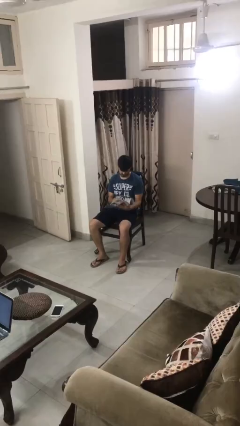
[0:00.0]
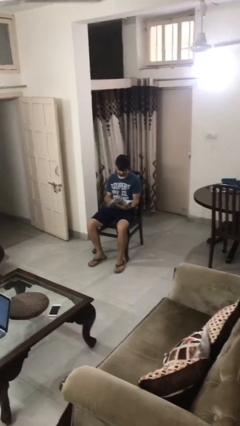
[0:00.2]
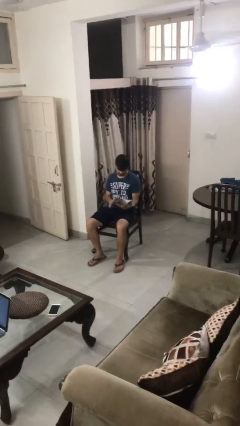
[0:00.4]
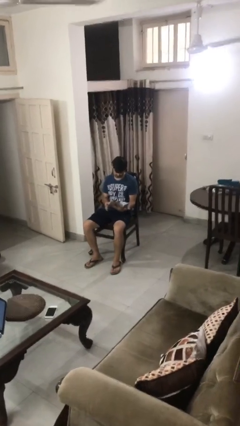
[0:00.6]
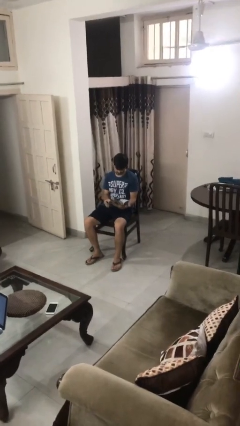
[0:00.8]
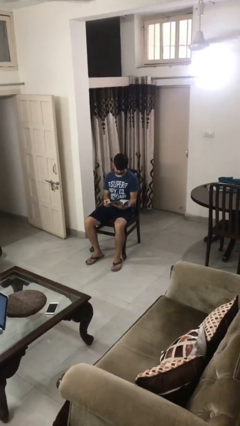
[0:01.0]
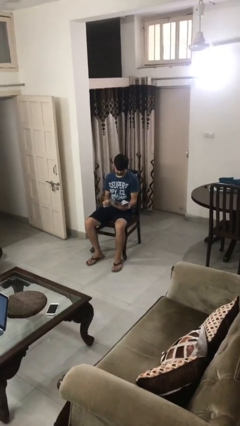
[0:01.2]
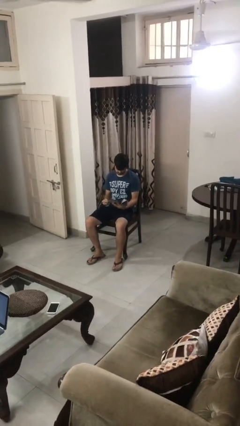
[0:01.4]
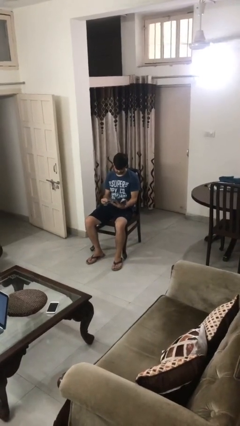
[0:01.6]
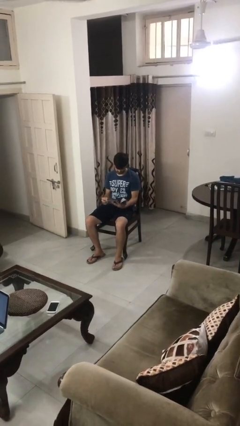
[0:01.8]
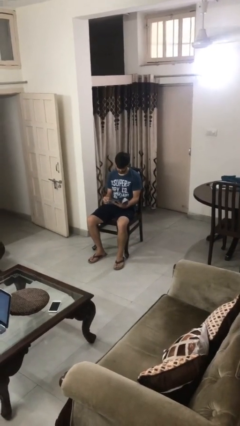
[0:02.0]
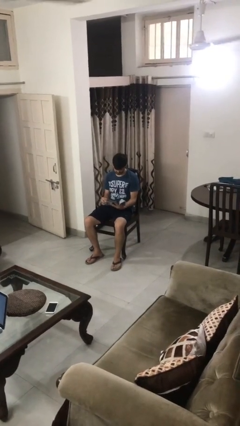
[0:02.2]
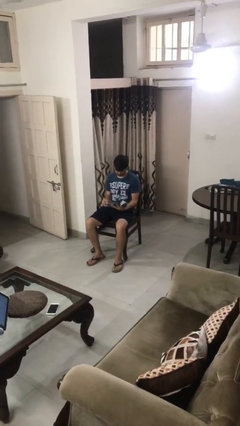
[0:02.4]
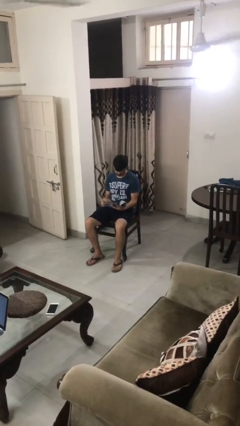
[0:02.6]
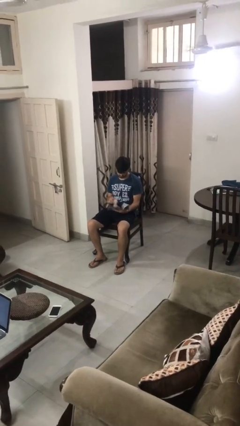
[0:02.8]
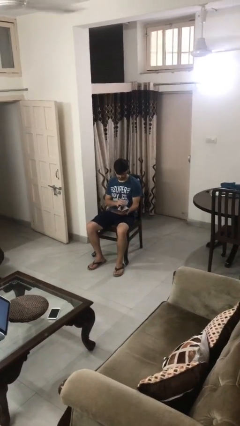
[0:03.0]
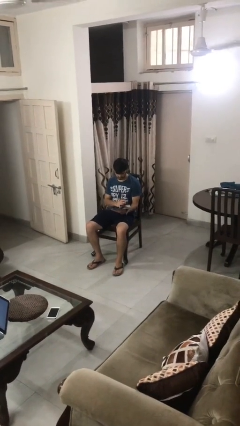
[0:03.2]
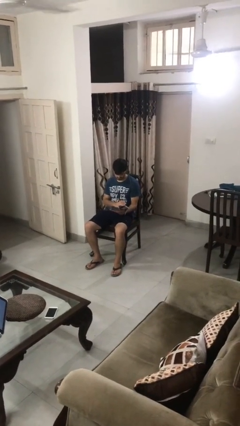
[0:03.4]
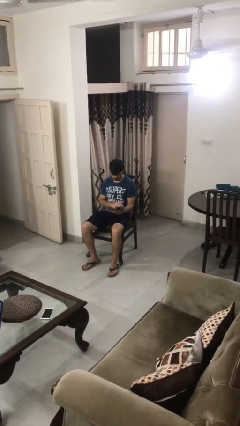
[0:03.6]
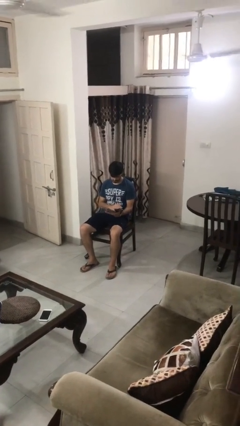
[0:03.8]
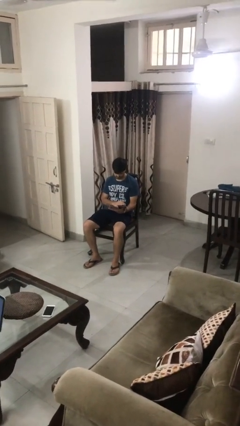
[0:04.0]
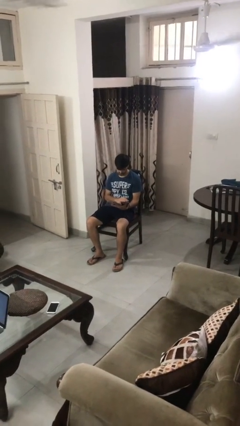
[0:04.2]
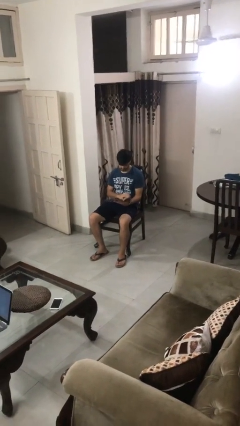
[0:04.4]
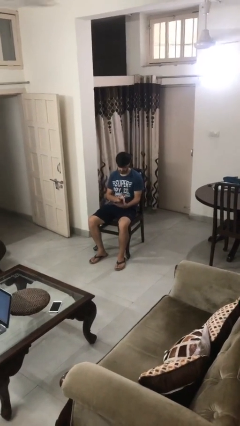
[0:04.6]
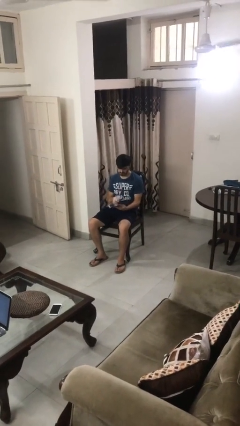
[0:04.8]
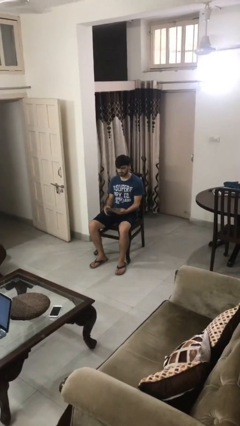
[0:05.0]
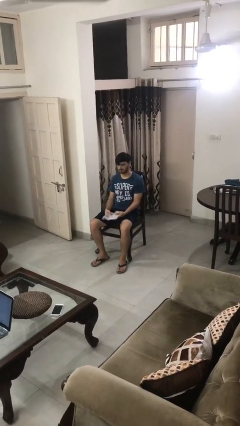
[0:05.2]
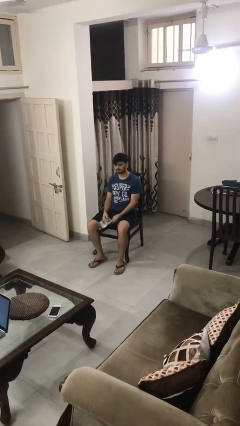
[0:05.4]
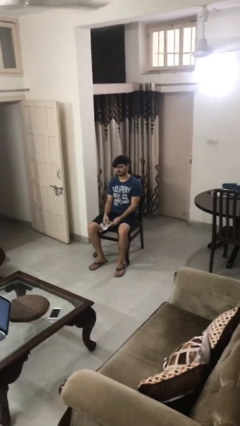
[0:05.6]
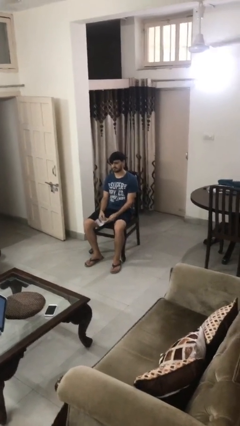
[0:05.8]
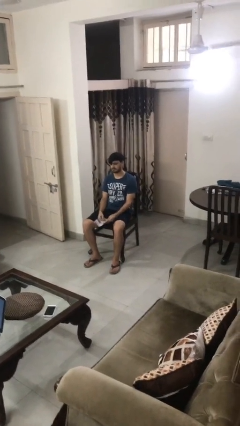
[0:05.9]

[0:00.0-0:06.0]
person reads magazine

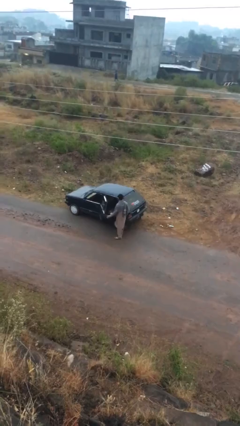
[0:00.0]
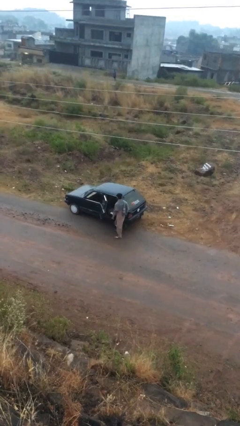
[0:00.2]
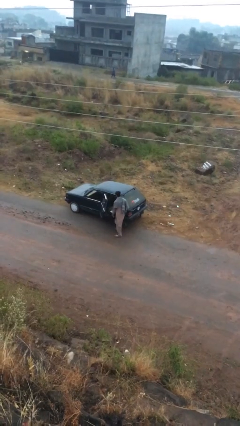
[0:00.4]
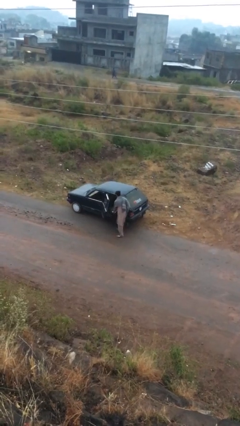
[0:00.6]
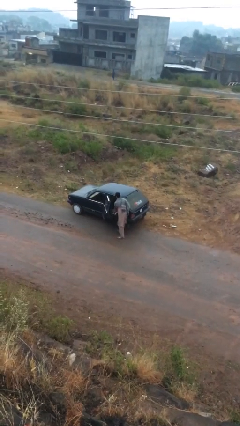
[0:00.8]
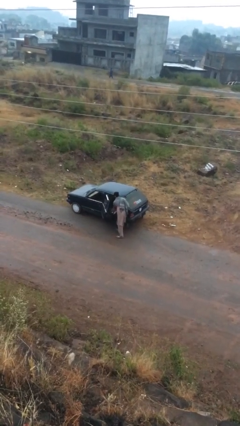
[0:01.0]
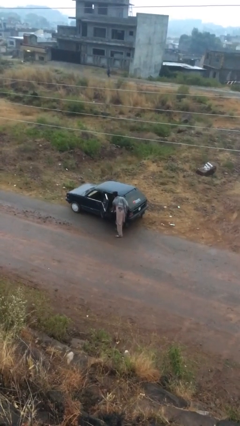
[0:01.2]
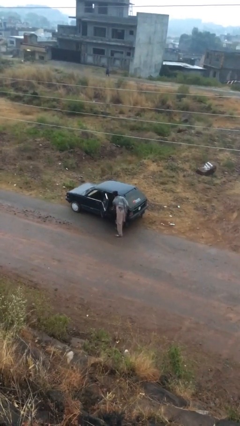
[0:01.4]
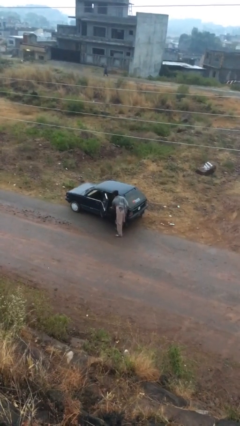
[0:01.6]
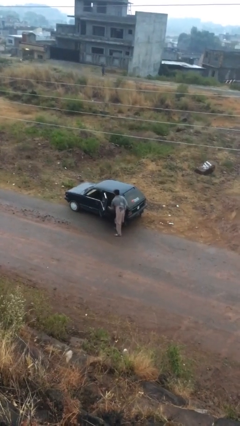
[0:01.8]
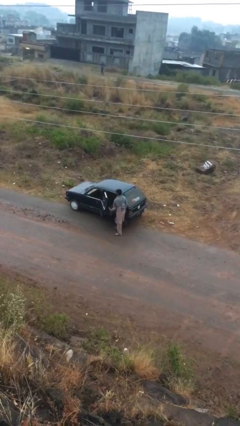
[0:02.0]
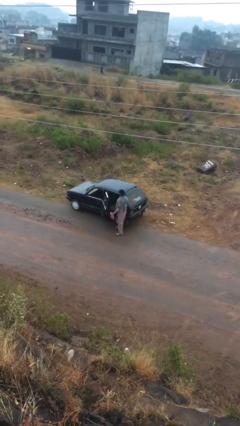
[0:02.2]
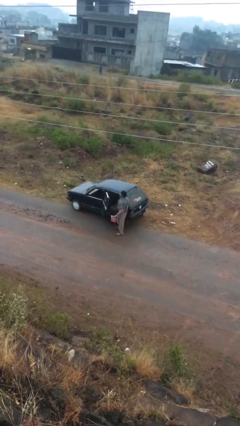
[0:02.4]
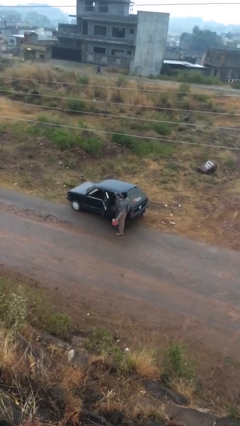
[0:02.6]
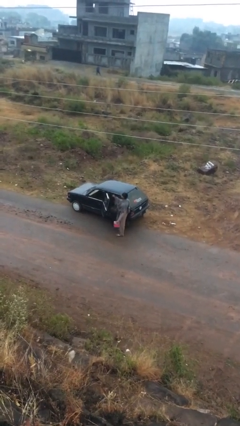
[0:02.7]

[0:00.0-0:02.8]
person unloads car

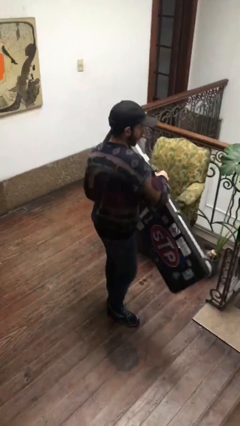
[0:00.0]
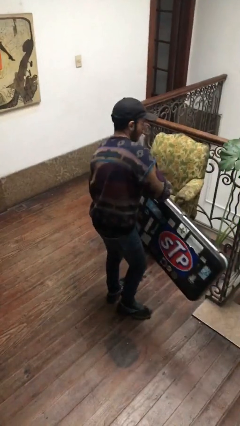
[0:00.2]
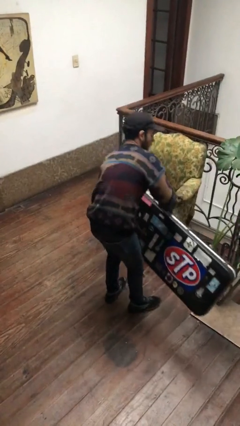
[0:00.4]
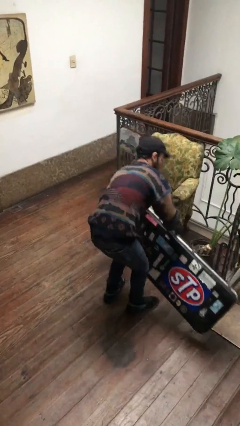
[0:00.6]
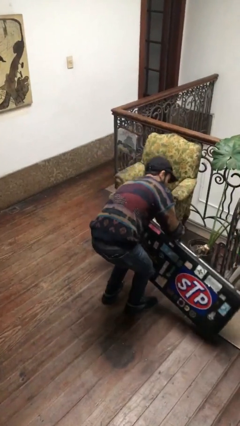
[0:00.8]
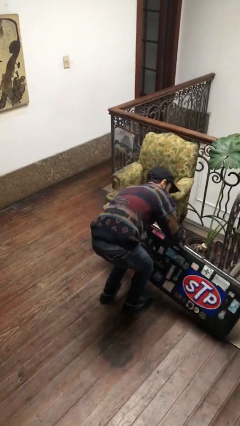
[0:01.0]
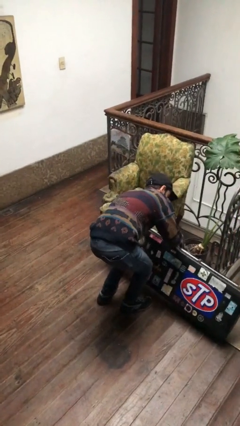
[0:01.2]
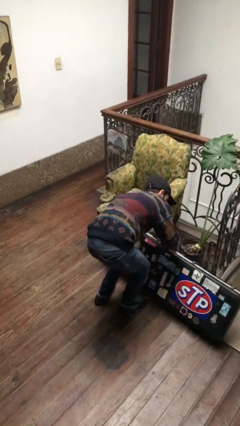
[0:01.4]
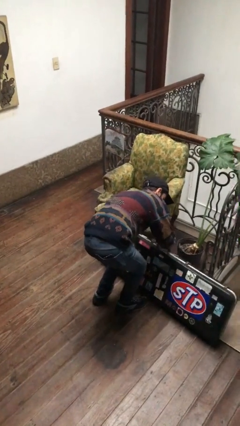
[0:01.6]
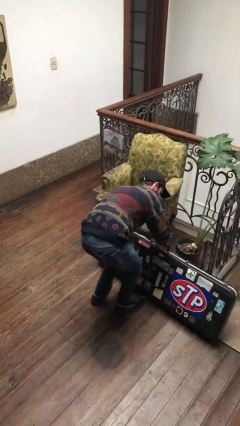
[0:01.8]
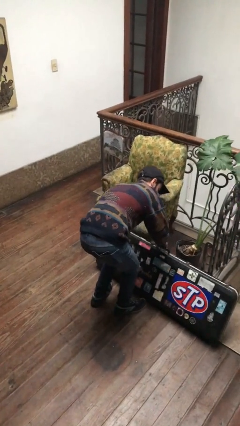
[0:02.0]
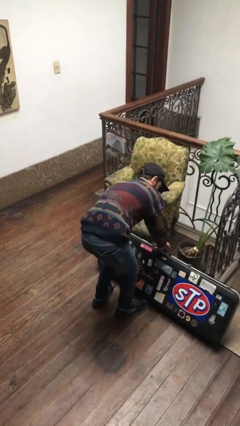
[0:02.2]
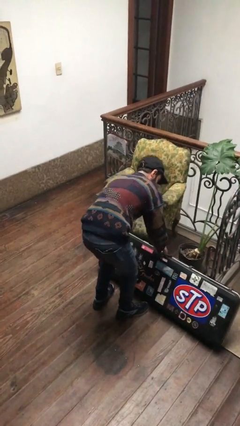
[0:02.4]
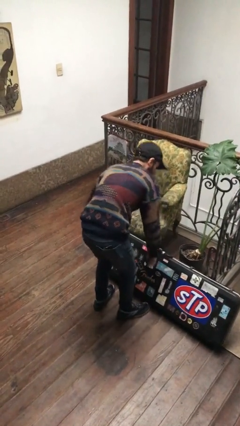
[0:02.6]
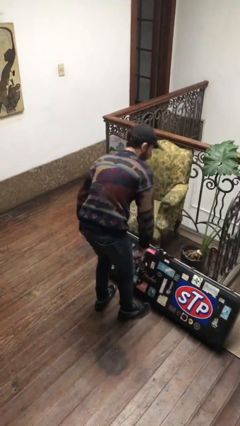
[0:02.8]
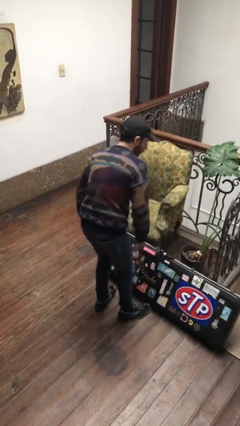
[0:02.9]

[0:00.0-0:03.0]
person puts down object on floor

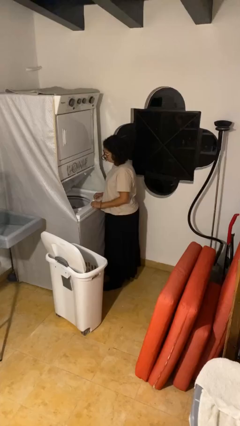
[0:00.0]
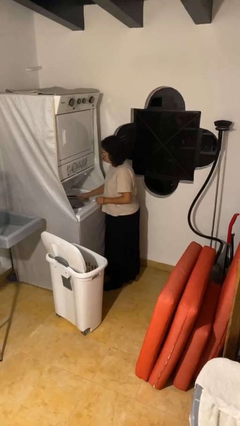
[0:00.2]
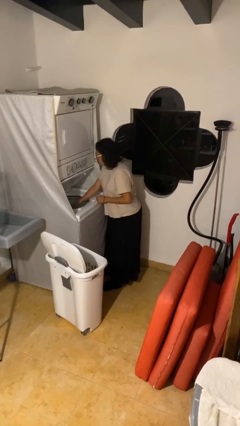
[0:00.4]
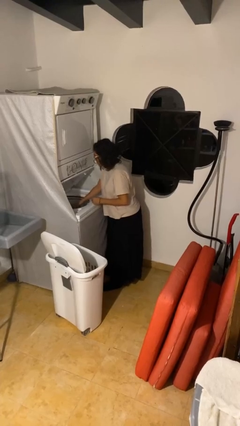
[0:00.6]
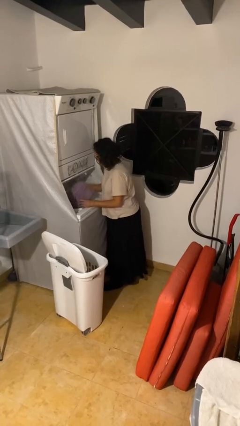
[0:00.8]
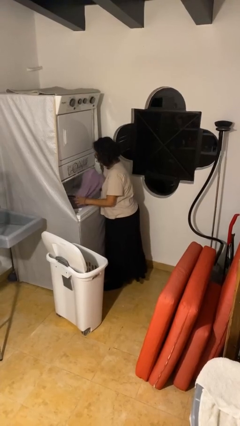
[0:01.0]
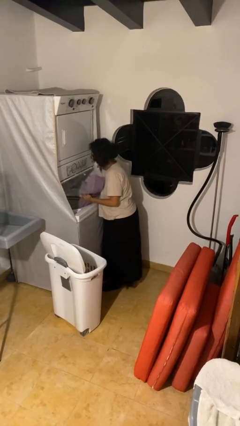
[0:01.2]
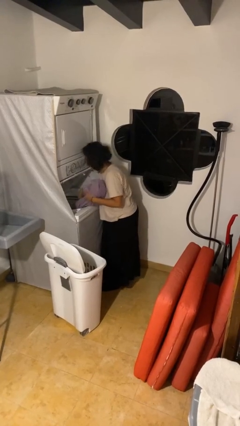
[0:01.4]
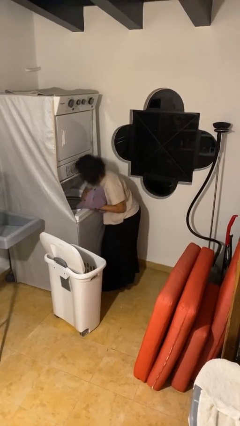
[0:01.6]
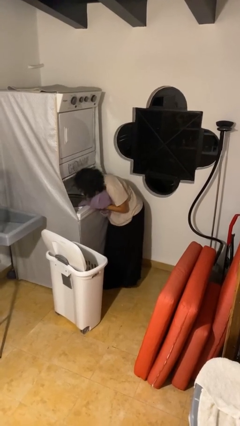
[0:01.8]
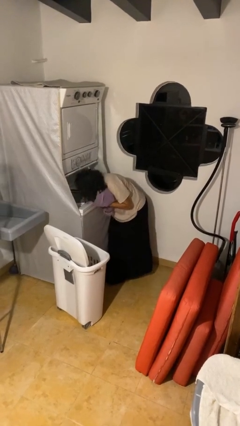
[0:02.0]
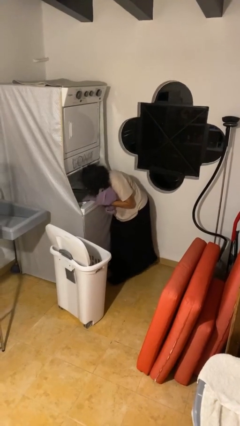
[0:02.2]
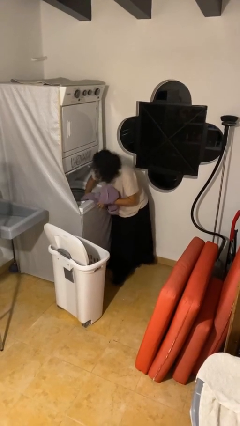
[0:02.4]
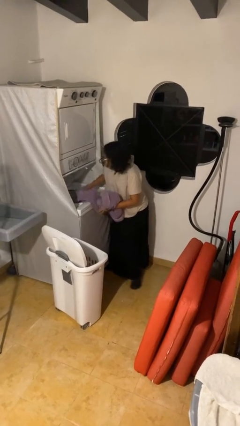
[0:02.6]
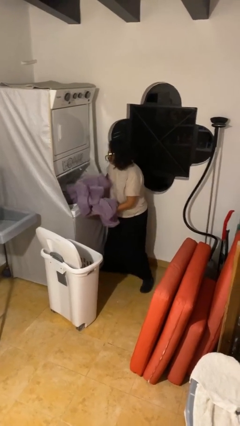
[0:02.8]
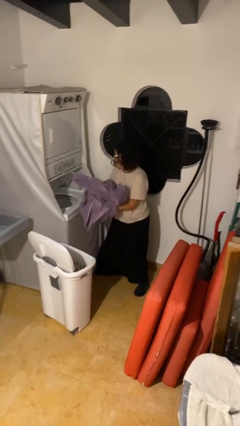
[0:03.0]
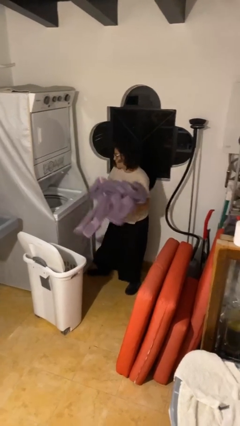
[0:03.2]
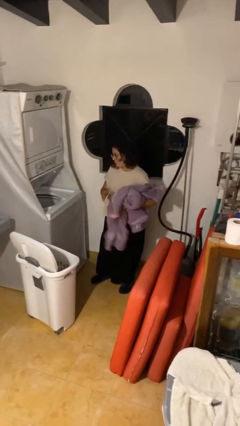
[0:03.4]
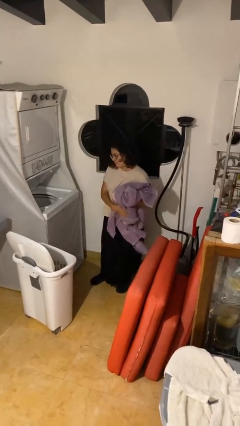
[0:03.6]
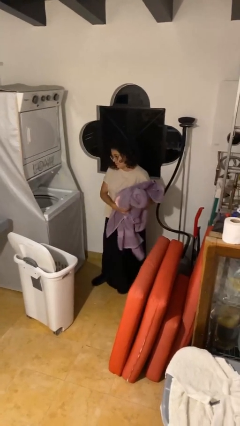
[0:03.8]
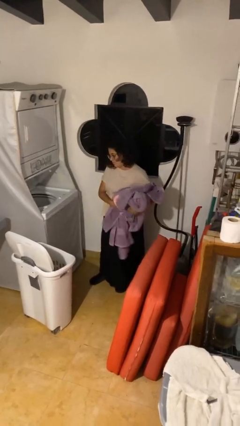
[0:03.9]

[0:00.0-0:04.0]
person unloads clotheswasher

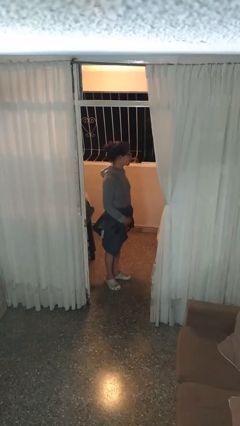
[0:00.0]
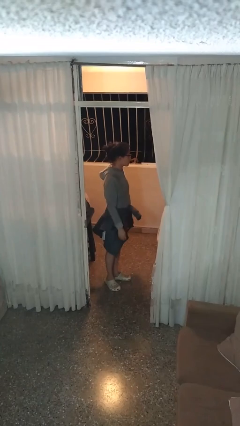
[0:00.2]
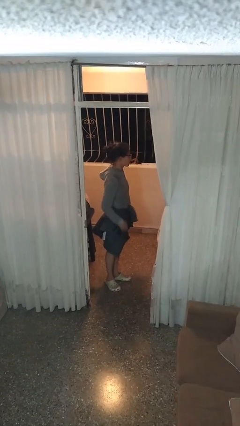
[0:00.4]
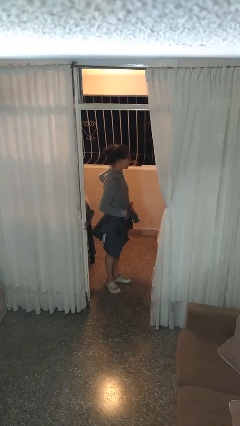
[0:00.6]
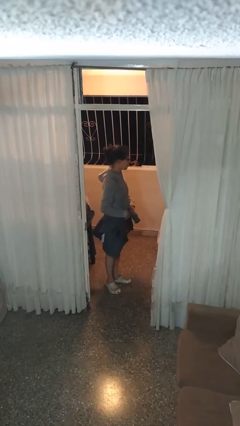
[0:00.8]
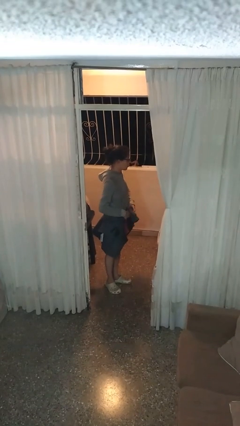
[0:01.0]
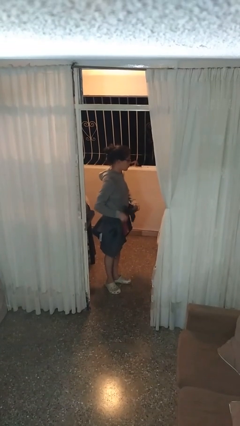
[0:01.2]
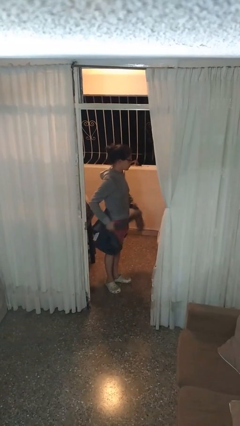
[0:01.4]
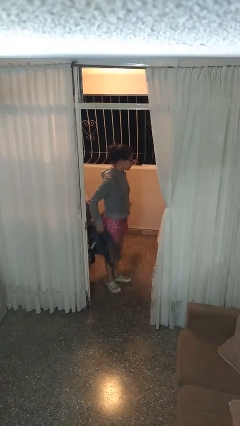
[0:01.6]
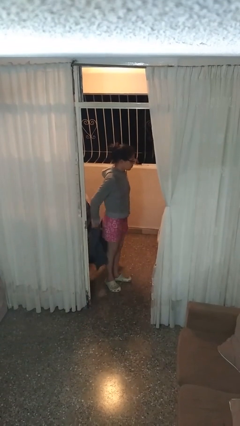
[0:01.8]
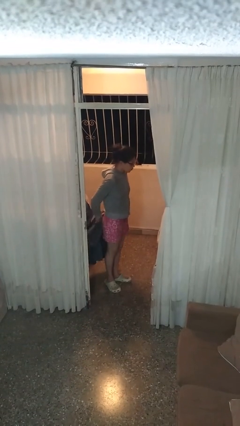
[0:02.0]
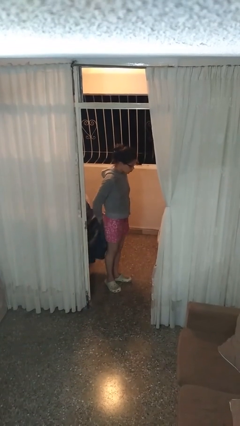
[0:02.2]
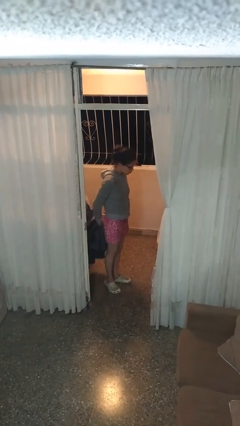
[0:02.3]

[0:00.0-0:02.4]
person unties jacket around waist
